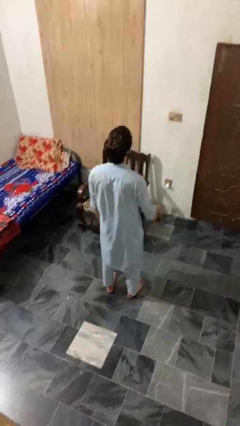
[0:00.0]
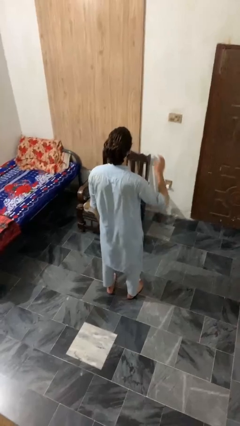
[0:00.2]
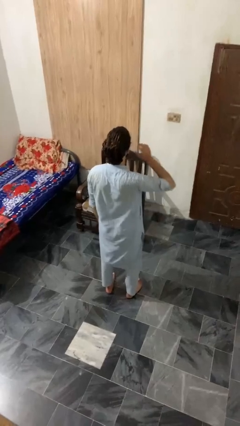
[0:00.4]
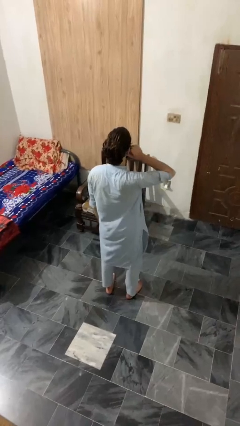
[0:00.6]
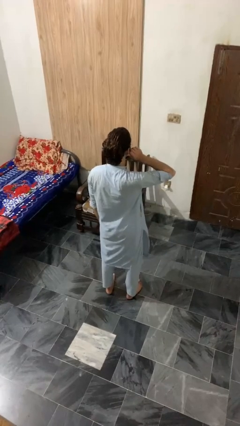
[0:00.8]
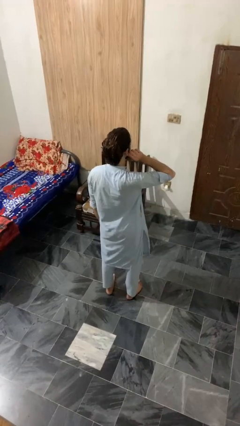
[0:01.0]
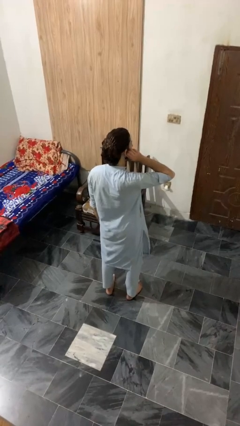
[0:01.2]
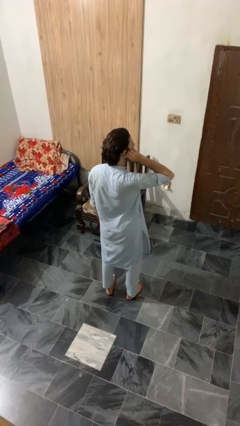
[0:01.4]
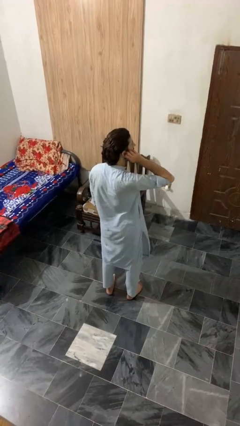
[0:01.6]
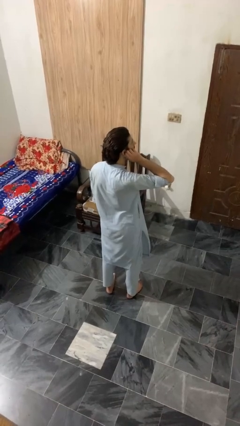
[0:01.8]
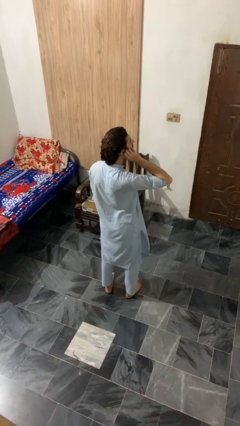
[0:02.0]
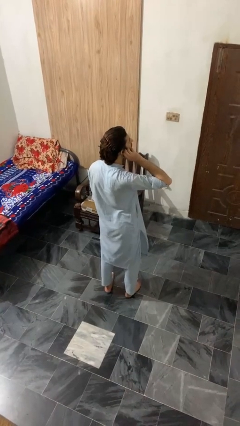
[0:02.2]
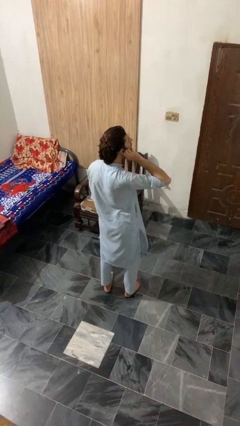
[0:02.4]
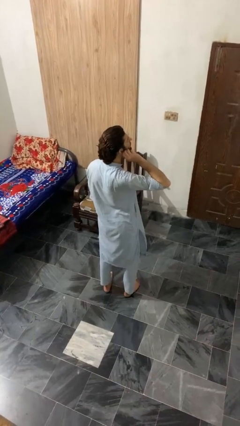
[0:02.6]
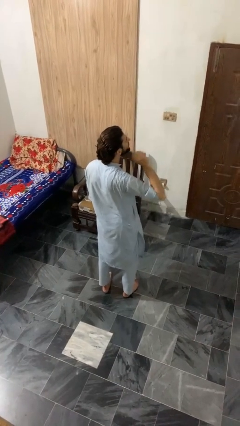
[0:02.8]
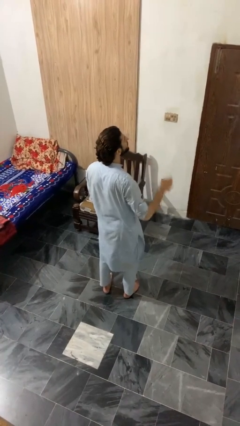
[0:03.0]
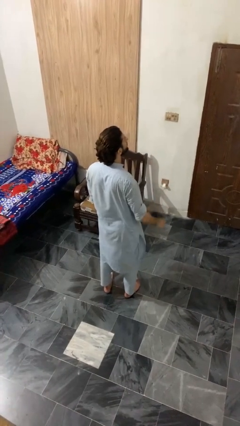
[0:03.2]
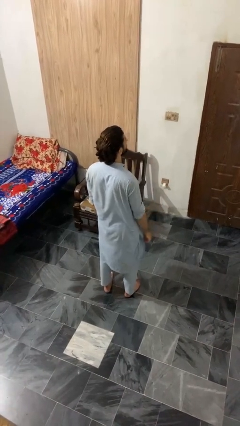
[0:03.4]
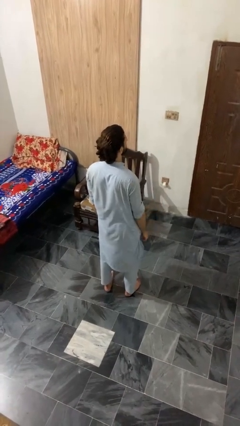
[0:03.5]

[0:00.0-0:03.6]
person touches earlobe

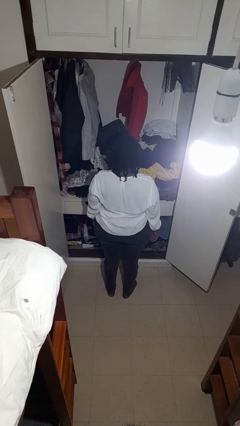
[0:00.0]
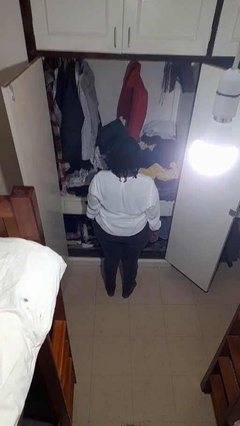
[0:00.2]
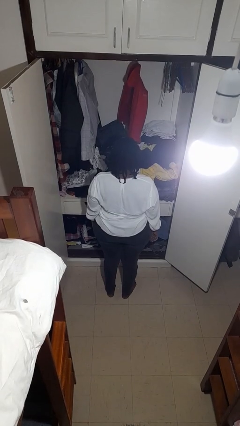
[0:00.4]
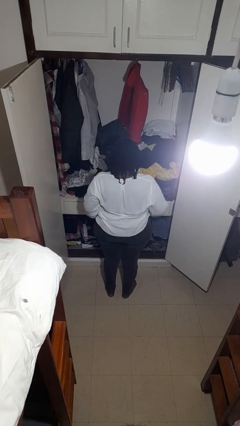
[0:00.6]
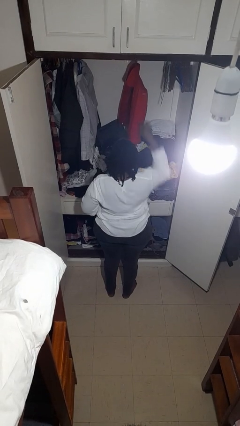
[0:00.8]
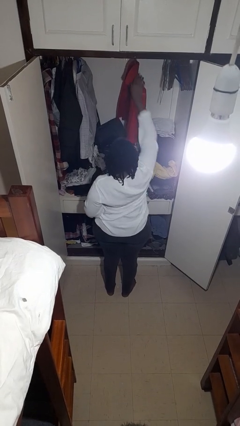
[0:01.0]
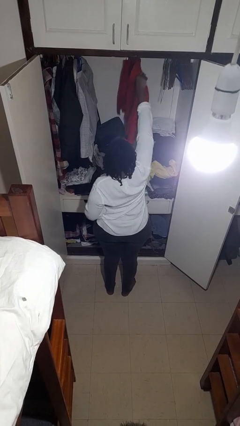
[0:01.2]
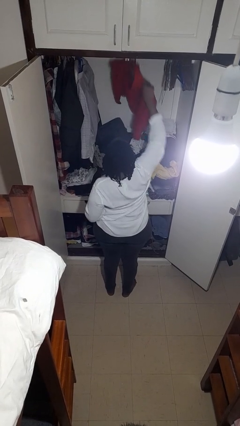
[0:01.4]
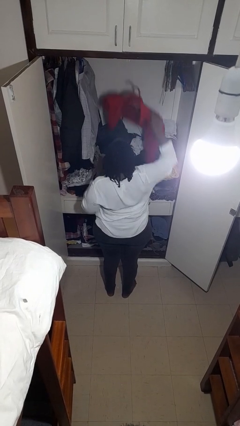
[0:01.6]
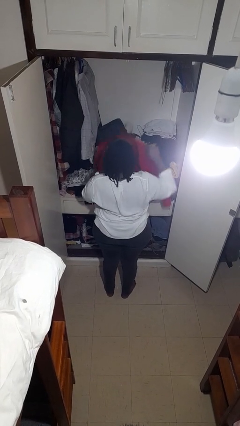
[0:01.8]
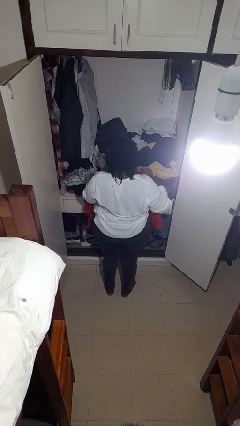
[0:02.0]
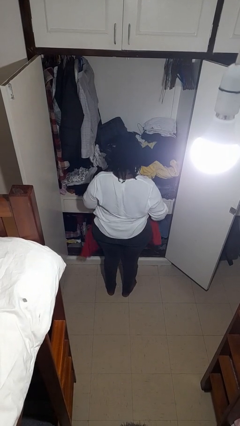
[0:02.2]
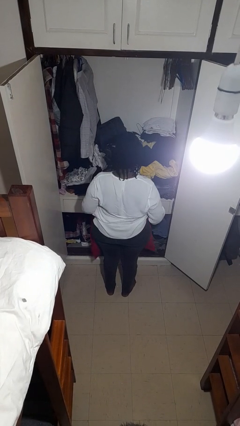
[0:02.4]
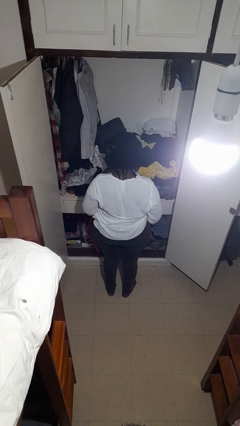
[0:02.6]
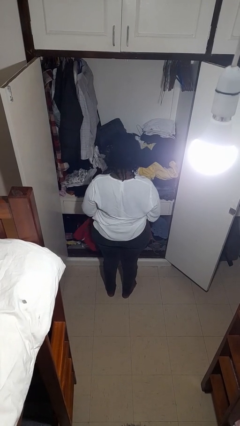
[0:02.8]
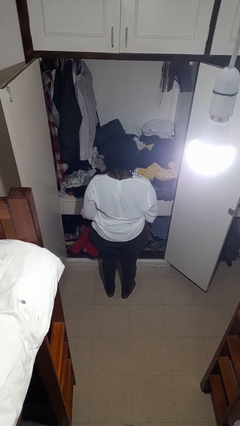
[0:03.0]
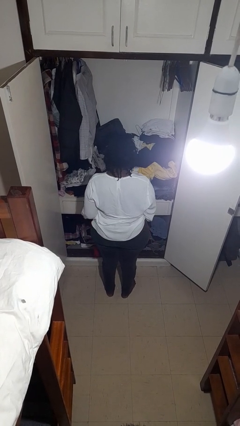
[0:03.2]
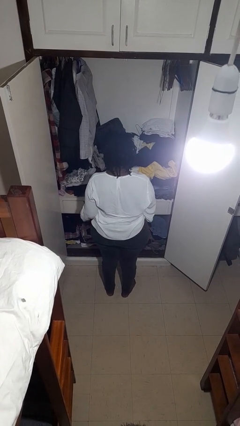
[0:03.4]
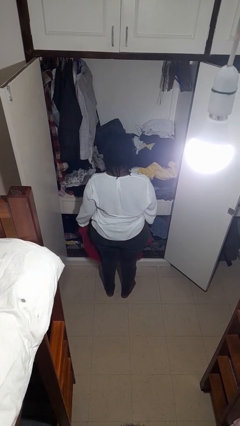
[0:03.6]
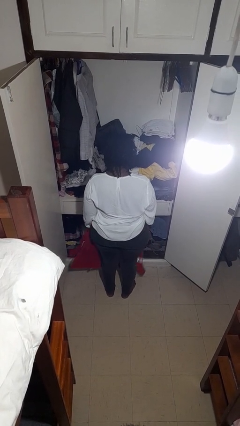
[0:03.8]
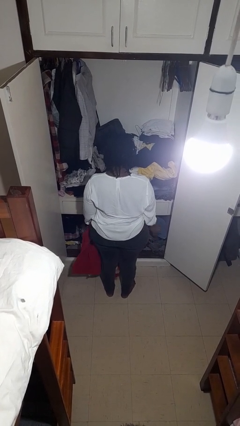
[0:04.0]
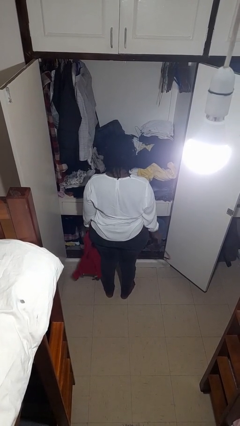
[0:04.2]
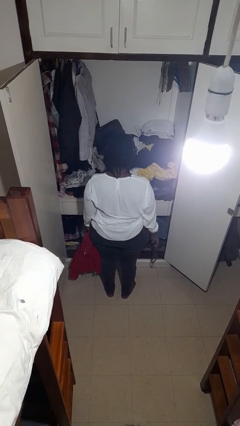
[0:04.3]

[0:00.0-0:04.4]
person takes clothes from closet

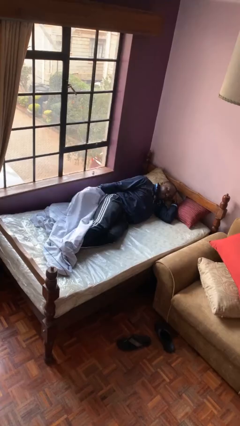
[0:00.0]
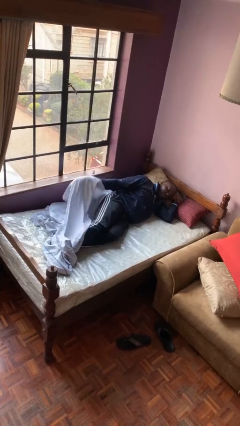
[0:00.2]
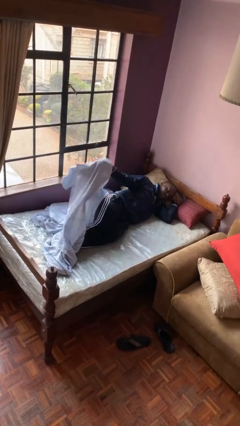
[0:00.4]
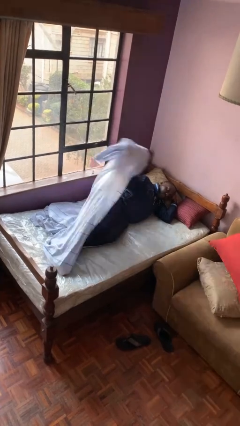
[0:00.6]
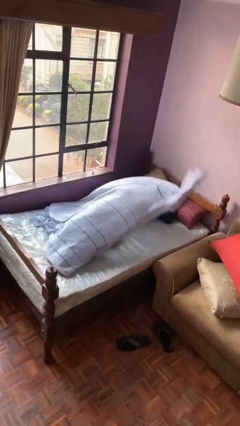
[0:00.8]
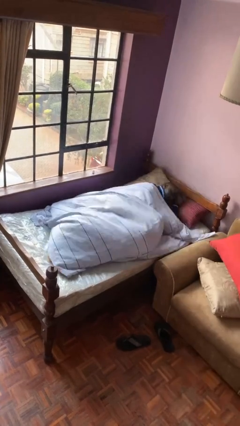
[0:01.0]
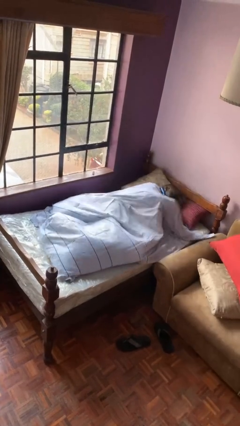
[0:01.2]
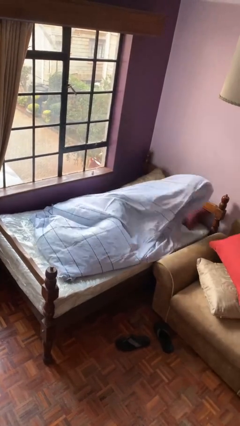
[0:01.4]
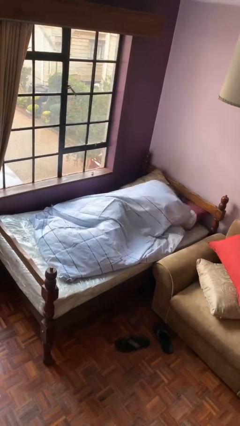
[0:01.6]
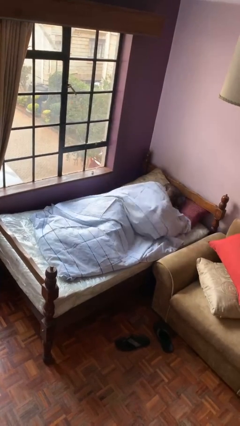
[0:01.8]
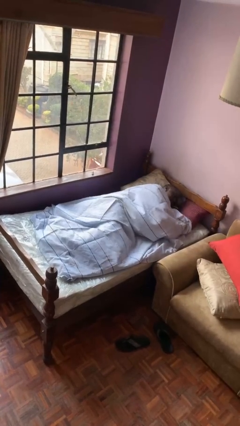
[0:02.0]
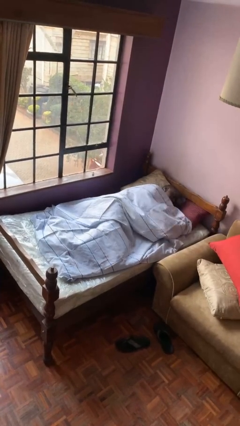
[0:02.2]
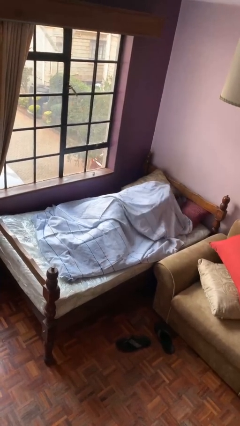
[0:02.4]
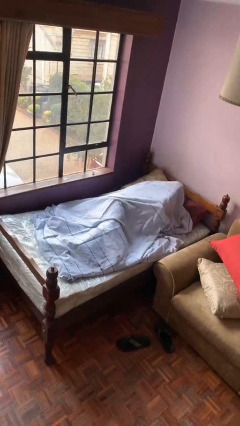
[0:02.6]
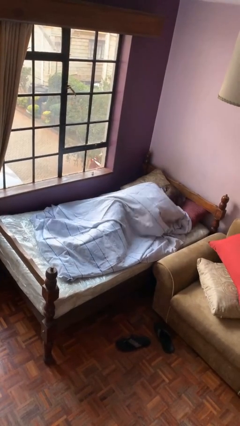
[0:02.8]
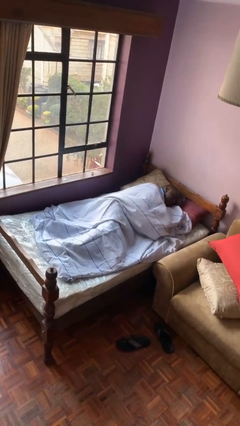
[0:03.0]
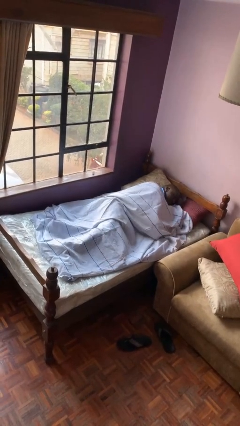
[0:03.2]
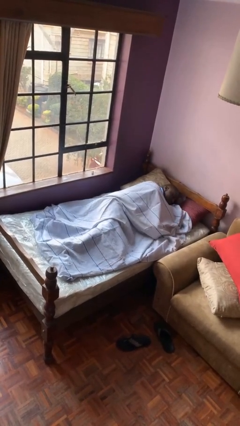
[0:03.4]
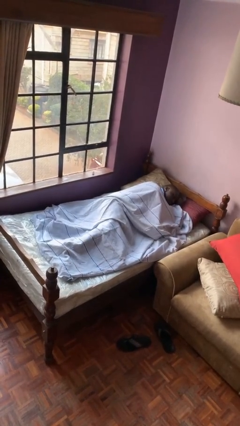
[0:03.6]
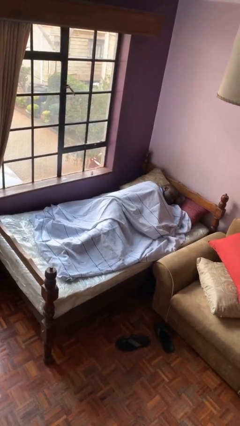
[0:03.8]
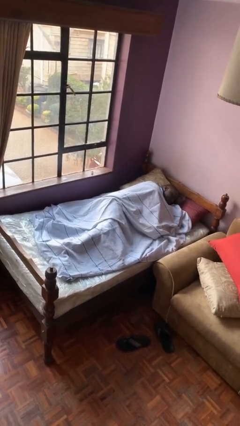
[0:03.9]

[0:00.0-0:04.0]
person covers with bedsheets

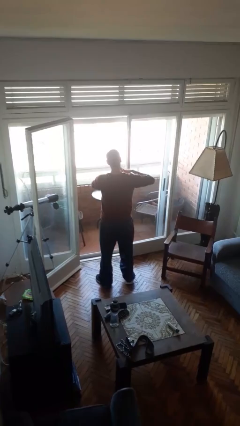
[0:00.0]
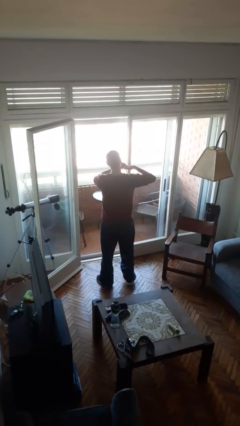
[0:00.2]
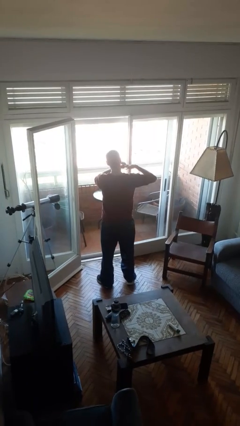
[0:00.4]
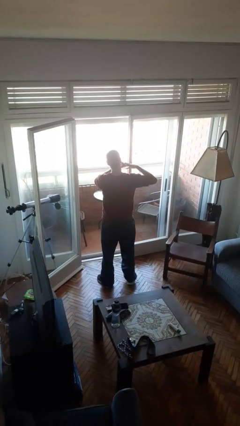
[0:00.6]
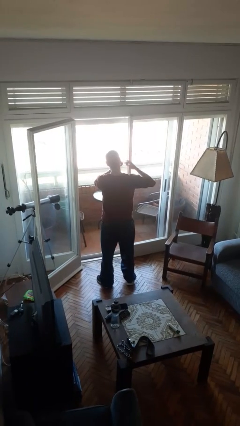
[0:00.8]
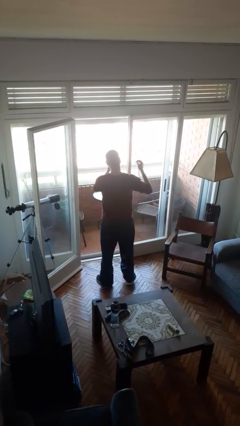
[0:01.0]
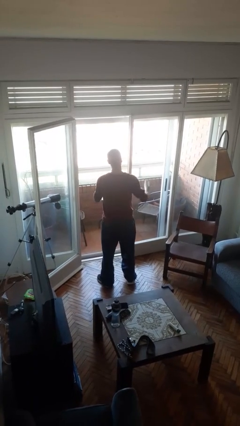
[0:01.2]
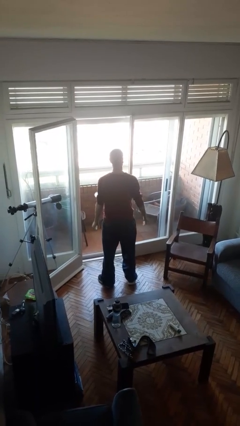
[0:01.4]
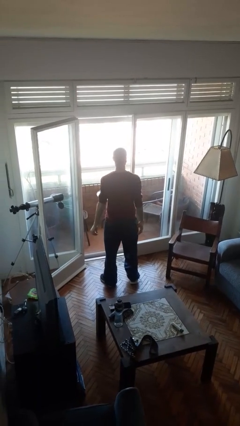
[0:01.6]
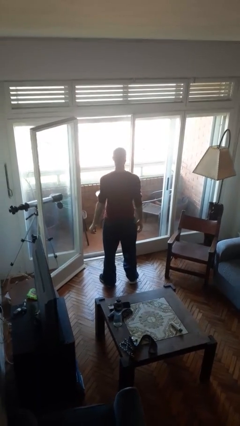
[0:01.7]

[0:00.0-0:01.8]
person takes off ring

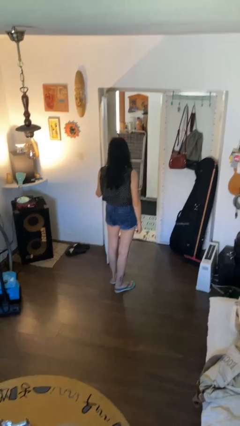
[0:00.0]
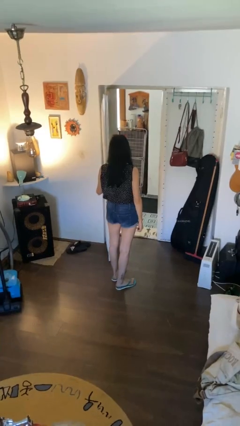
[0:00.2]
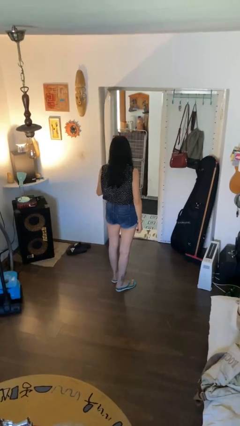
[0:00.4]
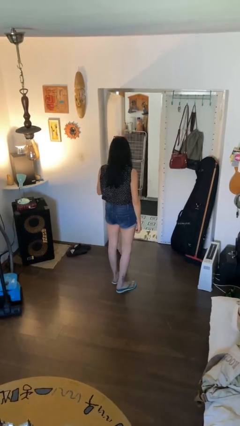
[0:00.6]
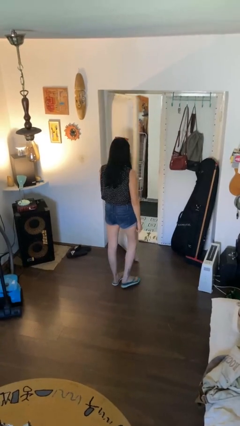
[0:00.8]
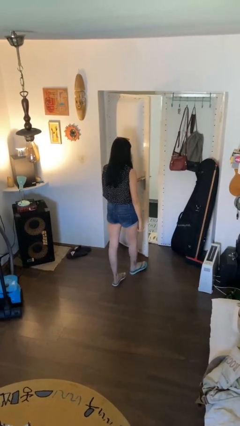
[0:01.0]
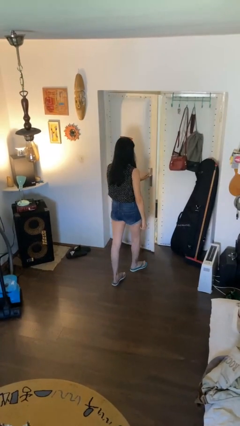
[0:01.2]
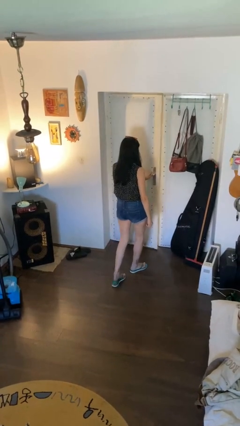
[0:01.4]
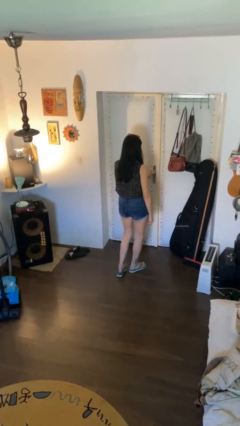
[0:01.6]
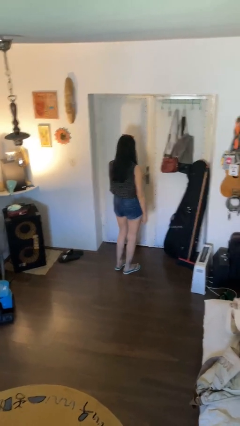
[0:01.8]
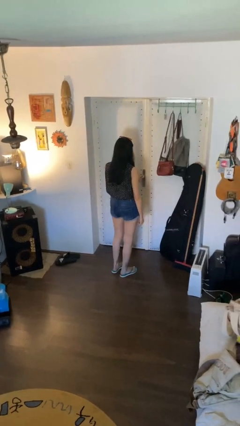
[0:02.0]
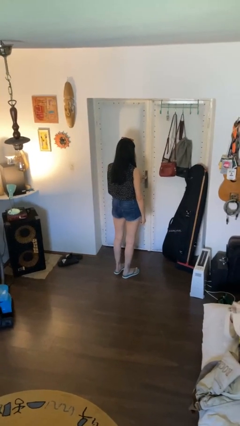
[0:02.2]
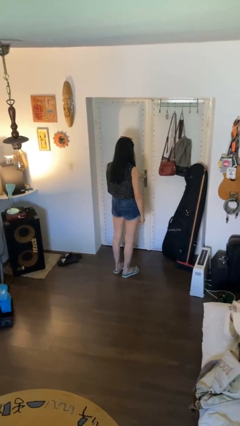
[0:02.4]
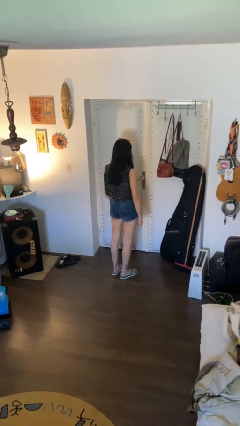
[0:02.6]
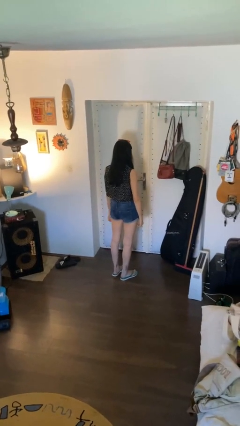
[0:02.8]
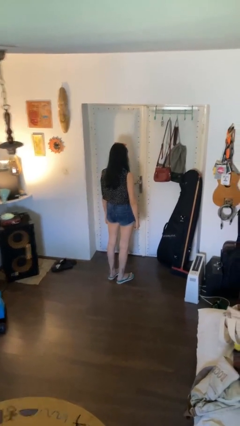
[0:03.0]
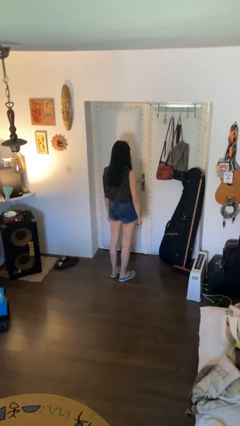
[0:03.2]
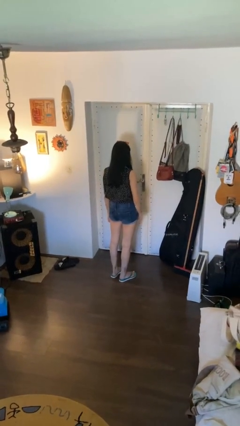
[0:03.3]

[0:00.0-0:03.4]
person closes facility door

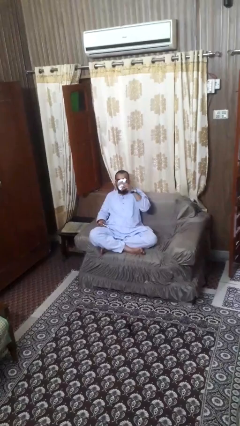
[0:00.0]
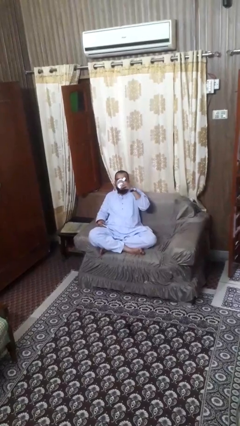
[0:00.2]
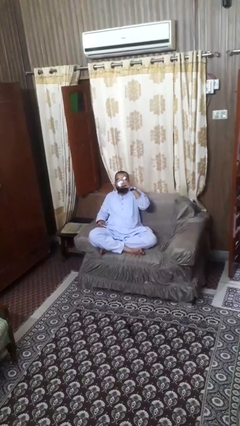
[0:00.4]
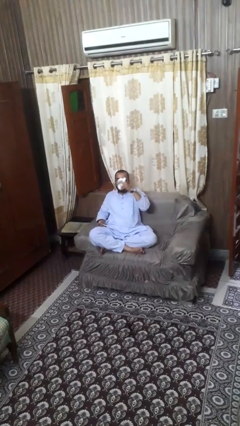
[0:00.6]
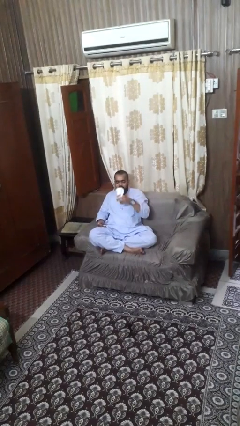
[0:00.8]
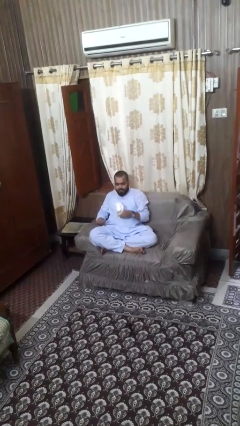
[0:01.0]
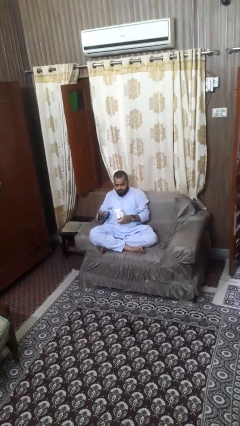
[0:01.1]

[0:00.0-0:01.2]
person drinks from mug
